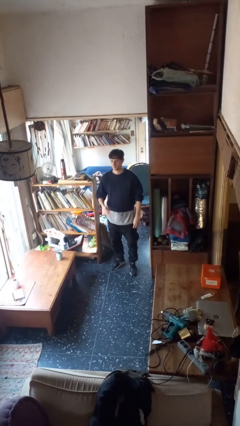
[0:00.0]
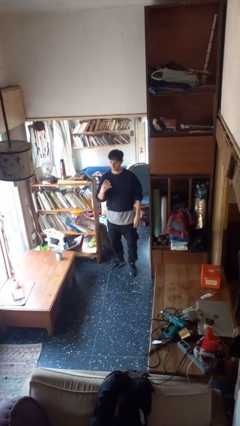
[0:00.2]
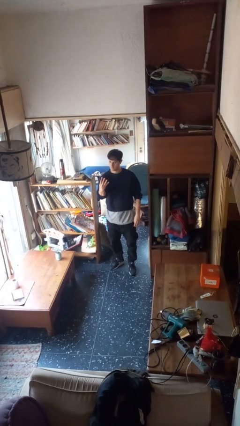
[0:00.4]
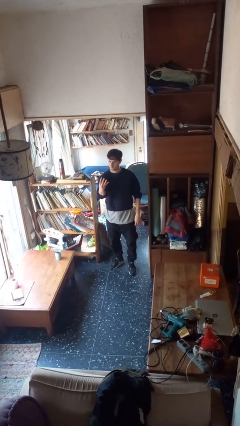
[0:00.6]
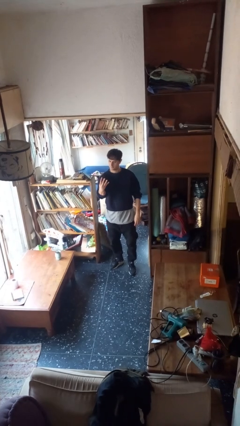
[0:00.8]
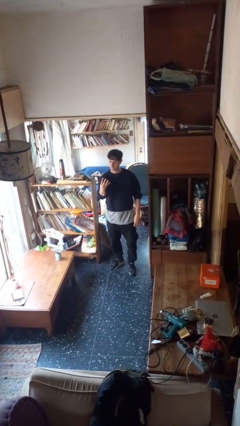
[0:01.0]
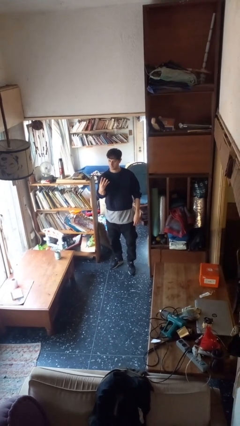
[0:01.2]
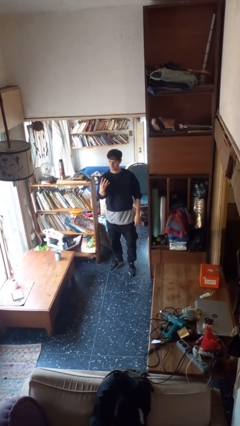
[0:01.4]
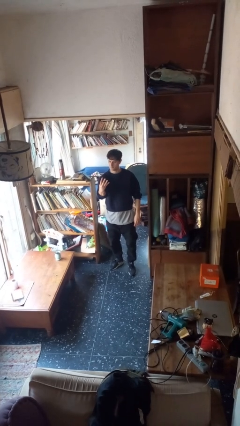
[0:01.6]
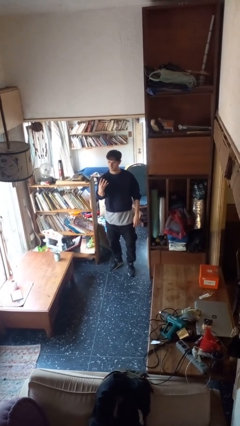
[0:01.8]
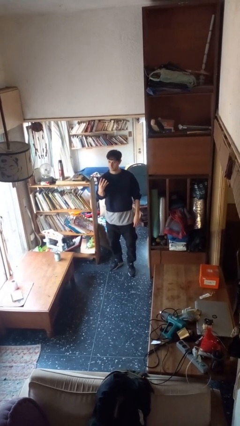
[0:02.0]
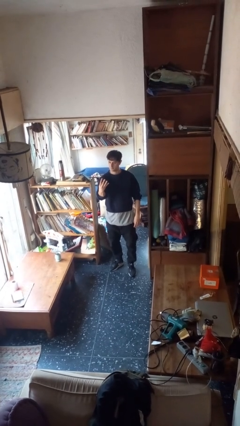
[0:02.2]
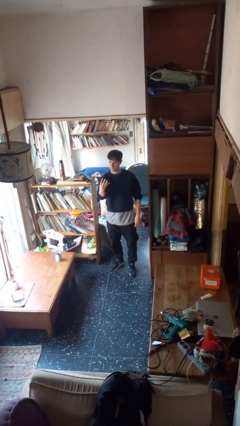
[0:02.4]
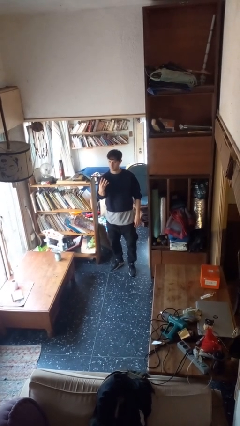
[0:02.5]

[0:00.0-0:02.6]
person gestures number four

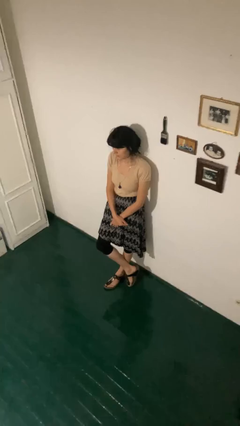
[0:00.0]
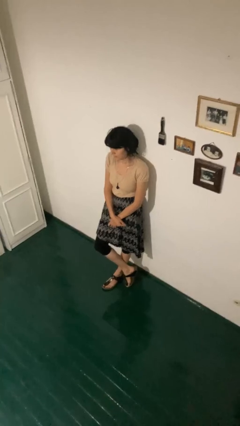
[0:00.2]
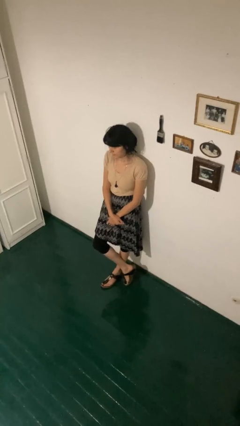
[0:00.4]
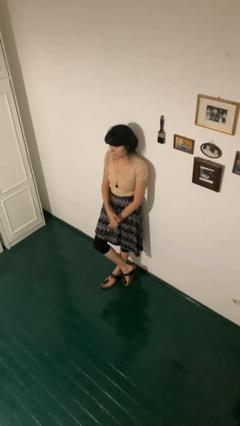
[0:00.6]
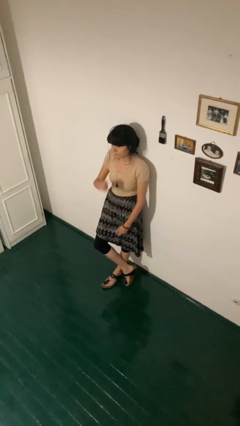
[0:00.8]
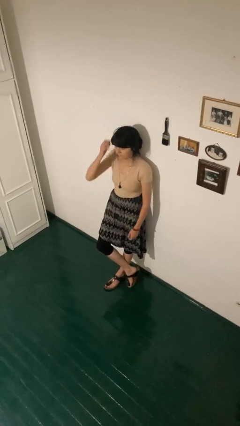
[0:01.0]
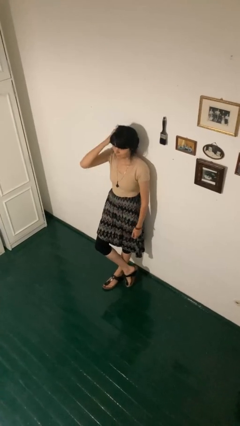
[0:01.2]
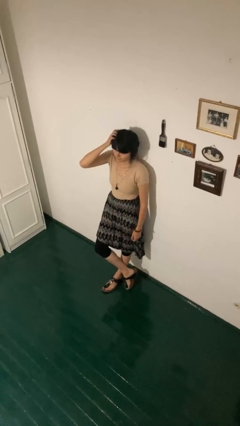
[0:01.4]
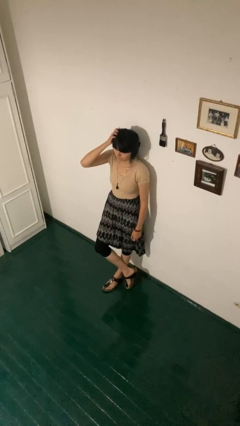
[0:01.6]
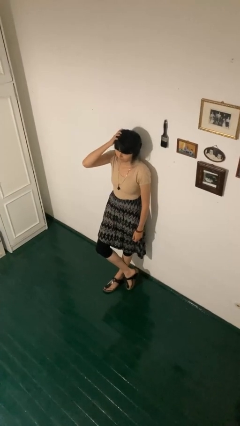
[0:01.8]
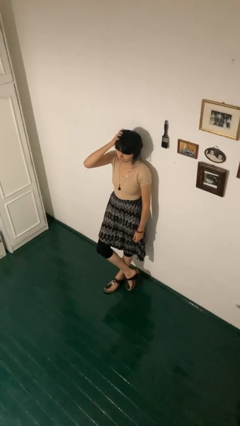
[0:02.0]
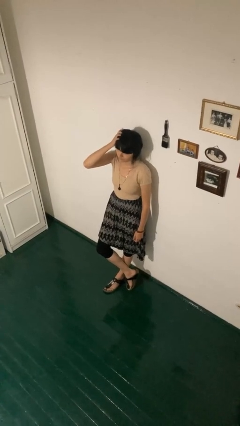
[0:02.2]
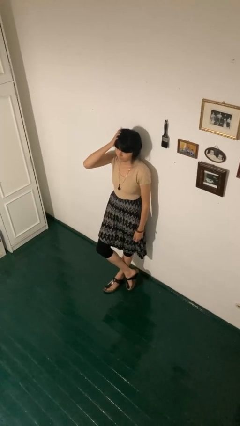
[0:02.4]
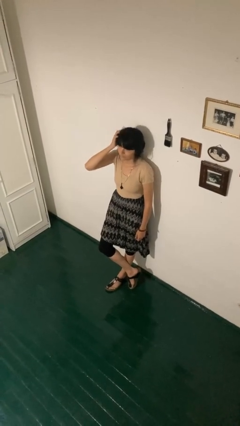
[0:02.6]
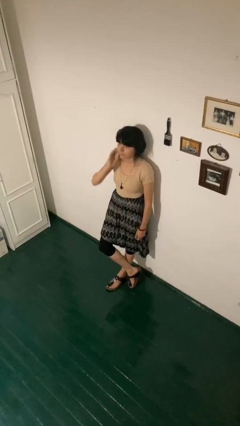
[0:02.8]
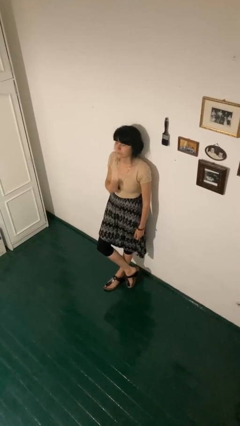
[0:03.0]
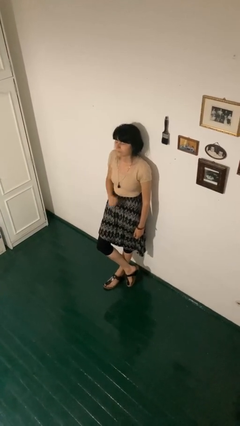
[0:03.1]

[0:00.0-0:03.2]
person scratches face

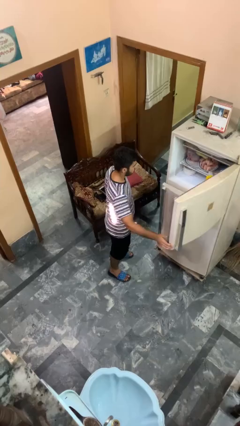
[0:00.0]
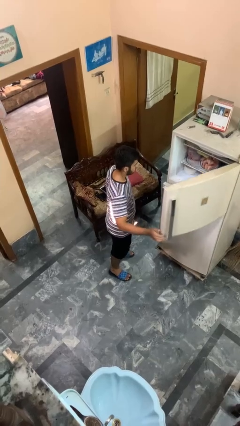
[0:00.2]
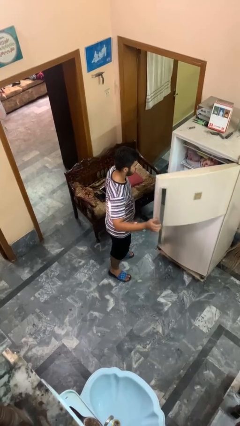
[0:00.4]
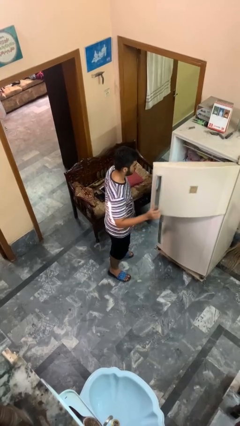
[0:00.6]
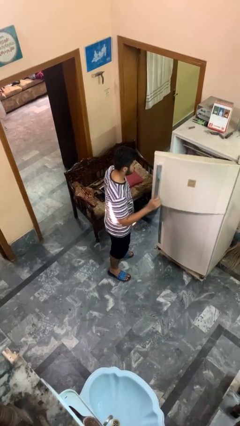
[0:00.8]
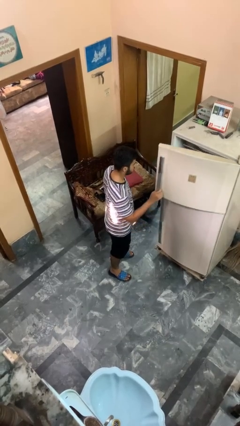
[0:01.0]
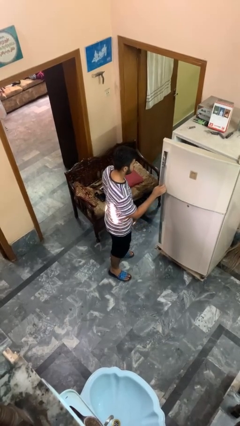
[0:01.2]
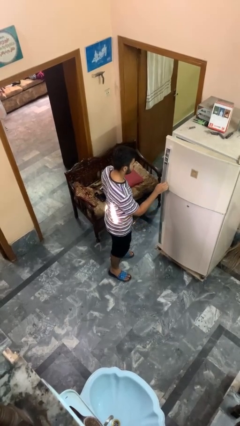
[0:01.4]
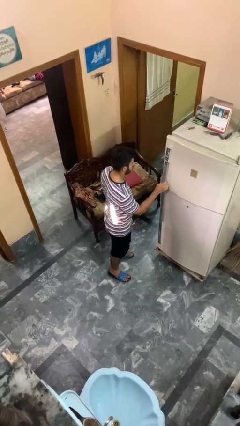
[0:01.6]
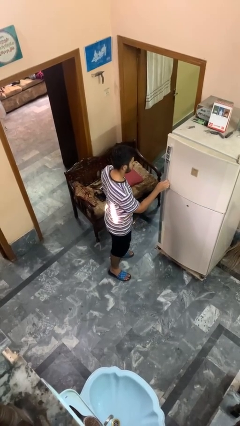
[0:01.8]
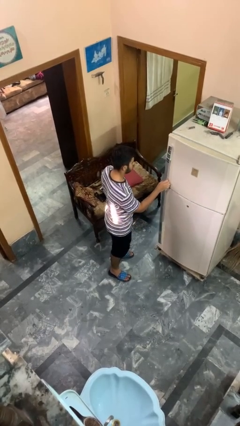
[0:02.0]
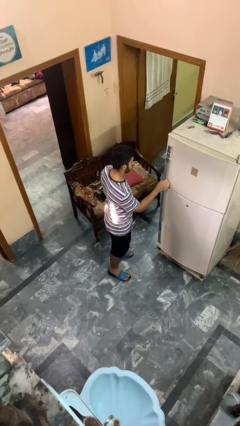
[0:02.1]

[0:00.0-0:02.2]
person closes refrigerator

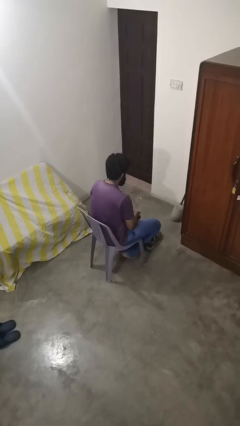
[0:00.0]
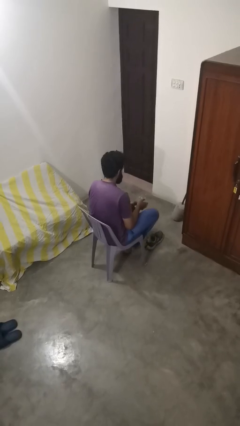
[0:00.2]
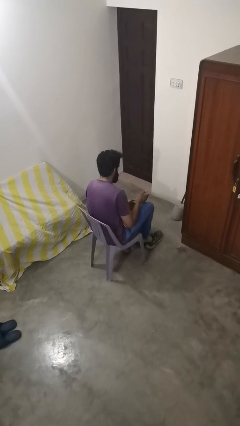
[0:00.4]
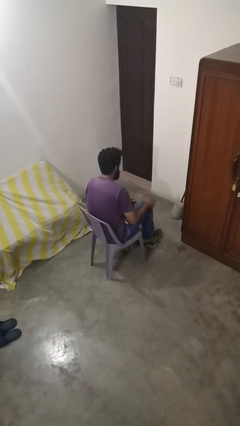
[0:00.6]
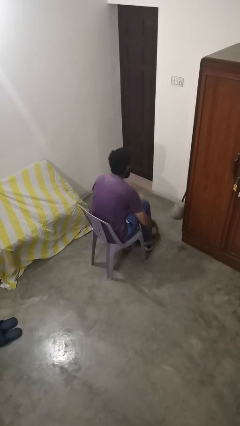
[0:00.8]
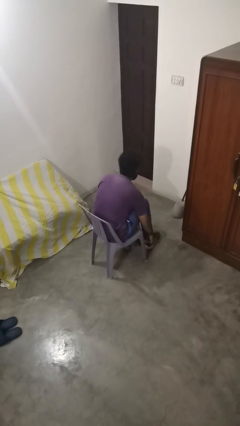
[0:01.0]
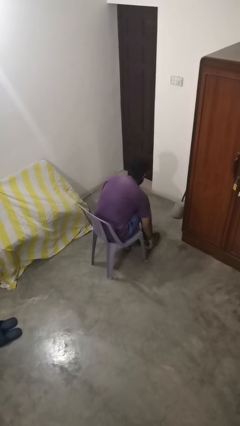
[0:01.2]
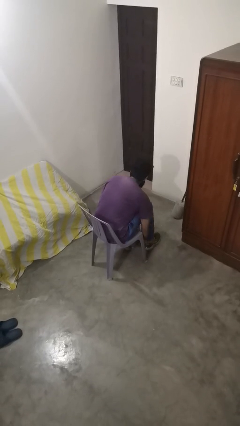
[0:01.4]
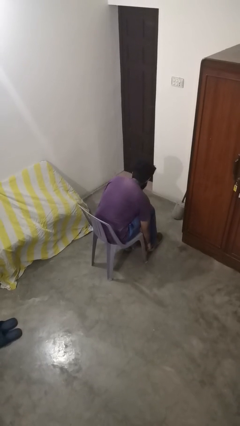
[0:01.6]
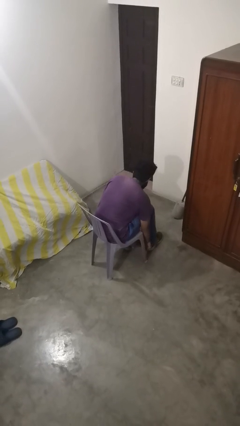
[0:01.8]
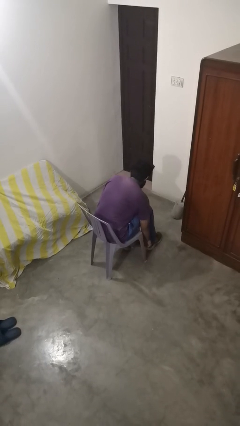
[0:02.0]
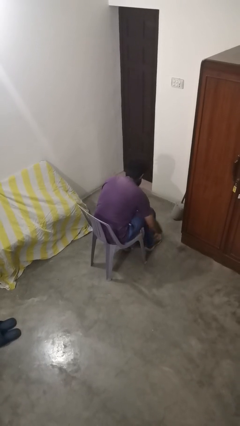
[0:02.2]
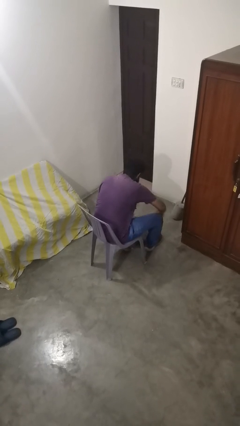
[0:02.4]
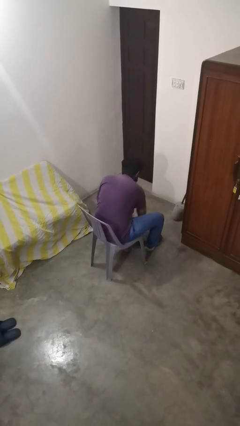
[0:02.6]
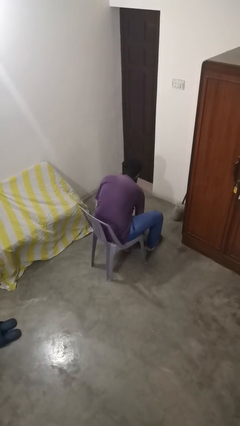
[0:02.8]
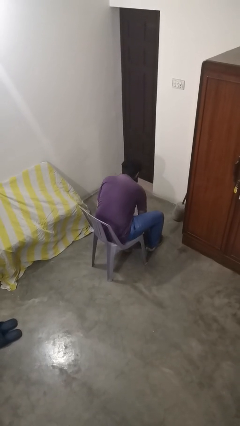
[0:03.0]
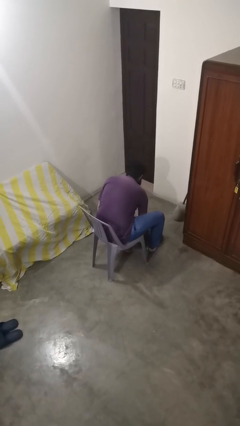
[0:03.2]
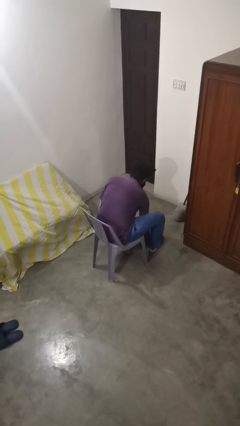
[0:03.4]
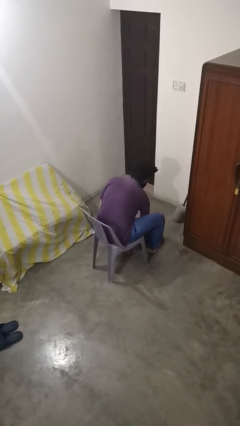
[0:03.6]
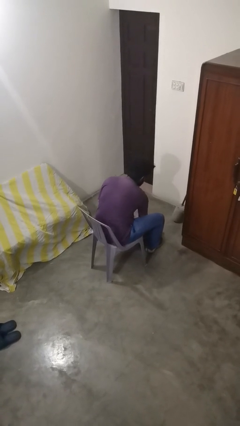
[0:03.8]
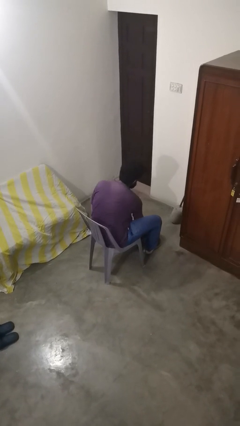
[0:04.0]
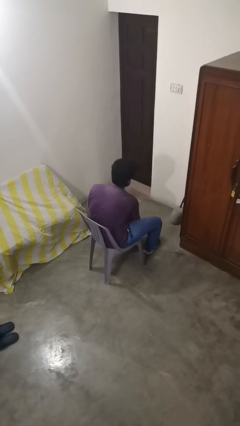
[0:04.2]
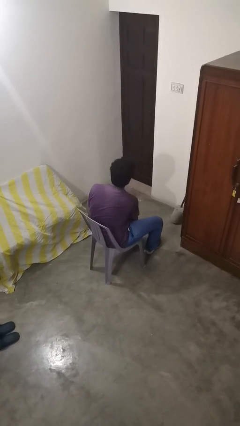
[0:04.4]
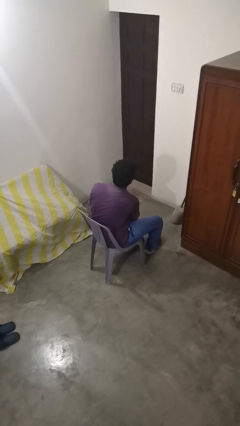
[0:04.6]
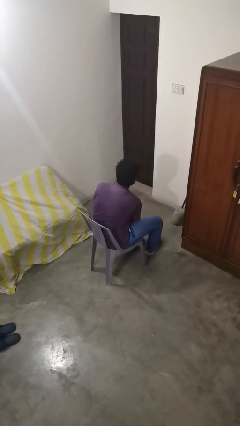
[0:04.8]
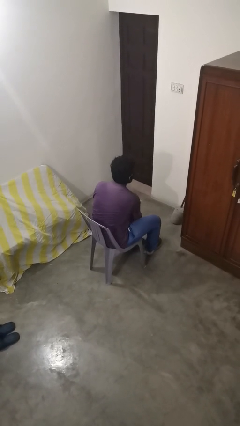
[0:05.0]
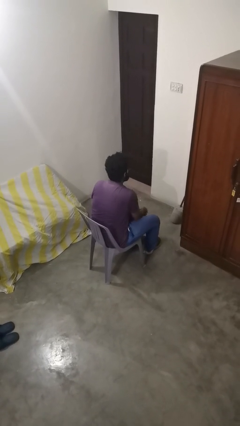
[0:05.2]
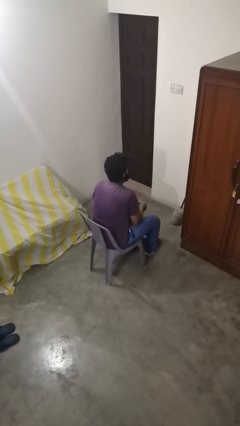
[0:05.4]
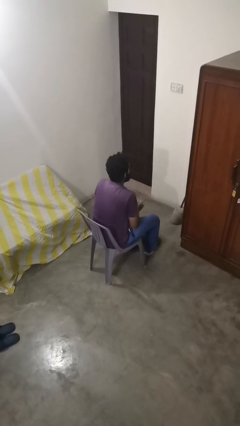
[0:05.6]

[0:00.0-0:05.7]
person puts on shoes

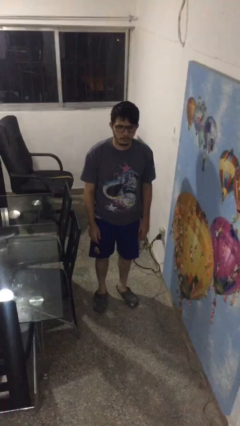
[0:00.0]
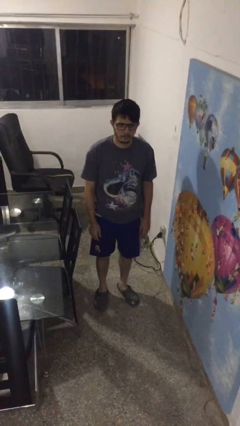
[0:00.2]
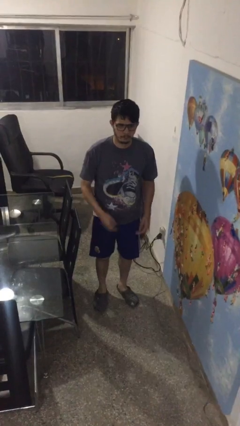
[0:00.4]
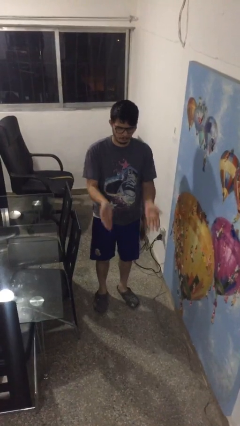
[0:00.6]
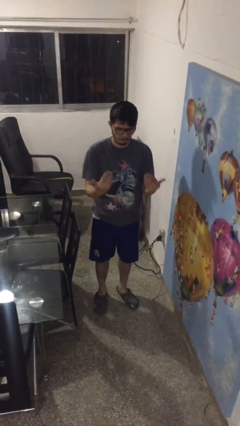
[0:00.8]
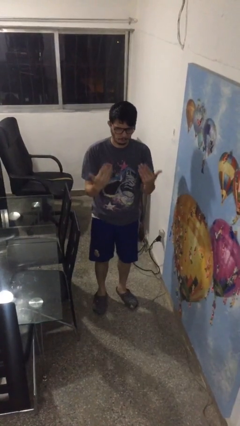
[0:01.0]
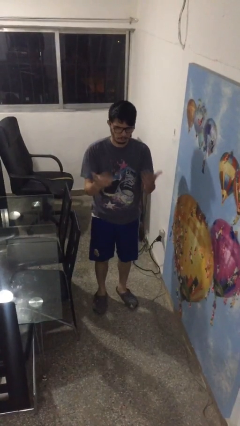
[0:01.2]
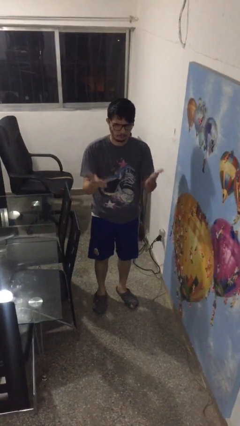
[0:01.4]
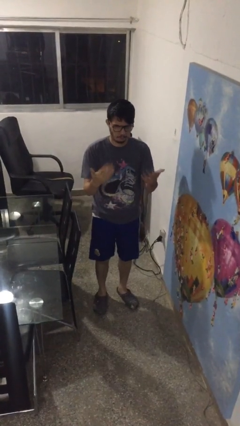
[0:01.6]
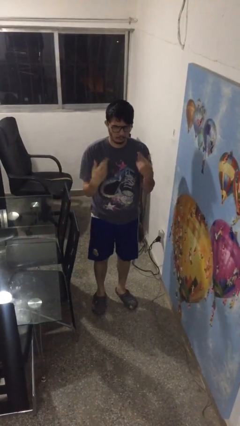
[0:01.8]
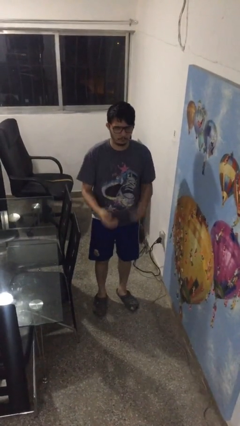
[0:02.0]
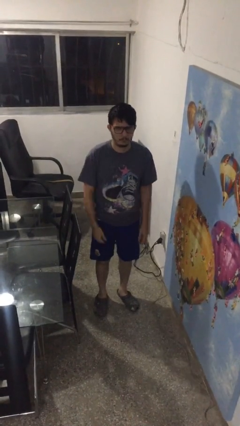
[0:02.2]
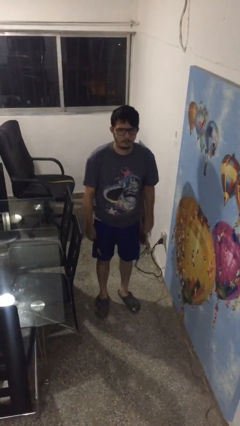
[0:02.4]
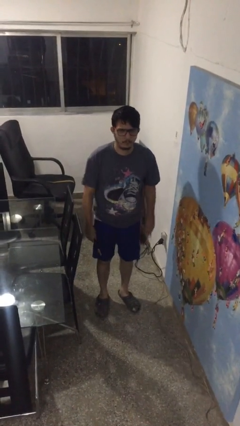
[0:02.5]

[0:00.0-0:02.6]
person gestures come here

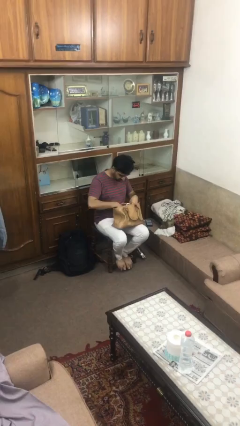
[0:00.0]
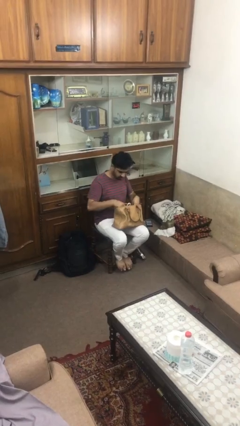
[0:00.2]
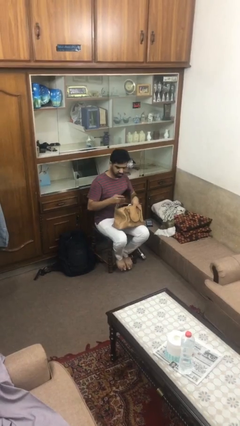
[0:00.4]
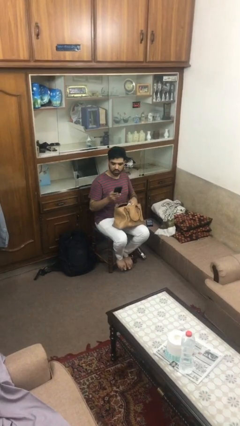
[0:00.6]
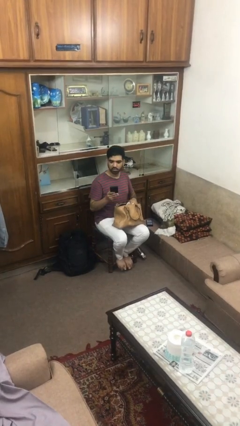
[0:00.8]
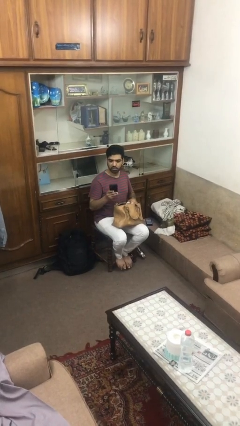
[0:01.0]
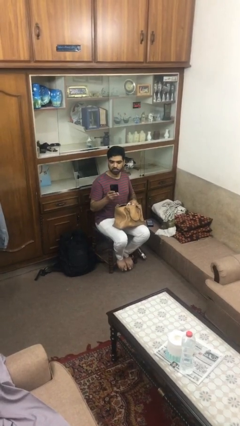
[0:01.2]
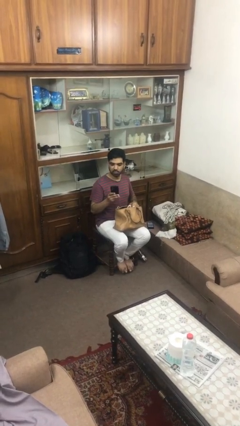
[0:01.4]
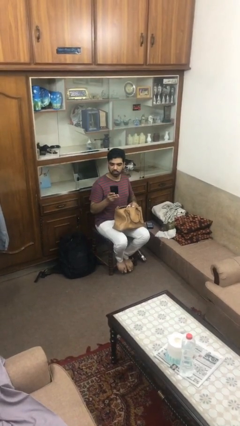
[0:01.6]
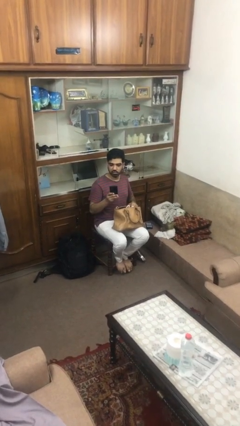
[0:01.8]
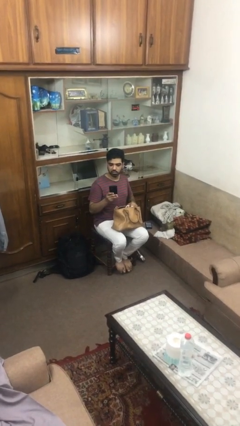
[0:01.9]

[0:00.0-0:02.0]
person takes object from purse
